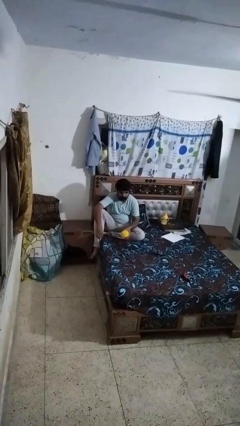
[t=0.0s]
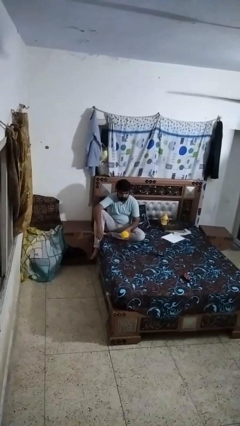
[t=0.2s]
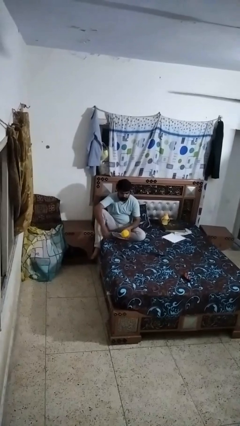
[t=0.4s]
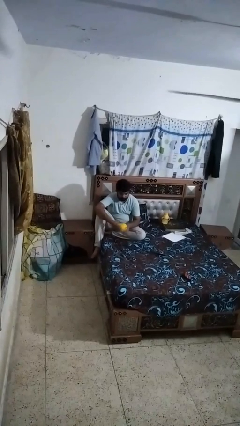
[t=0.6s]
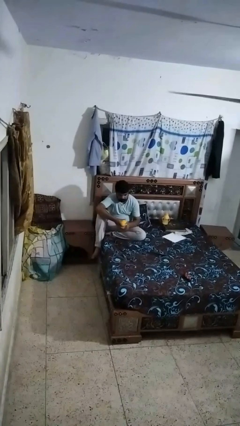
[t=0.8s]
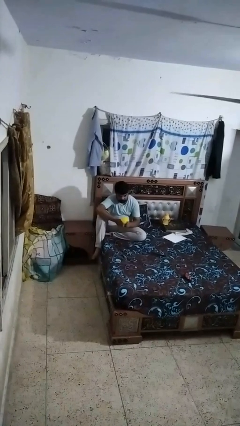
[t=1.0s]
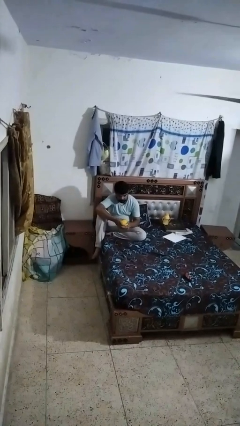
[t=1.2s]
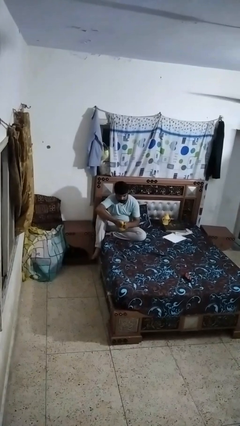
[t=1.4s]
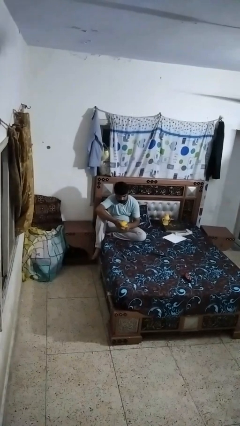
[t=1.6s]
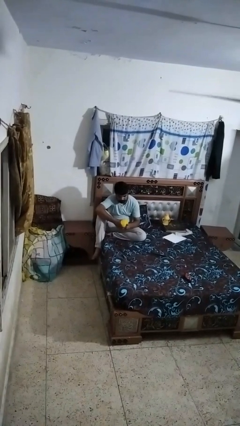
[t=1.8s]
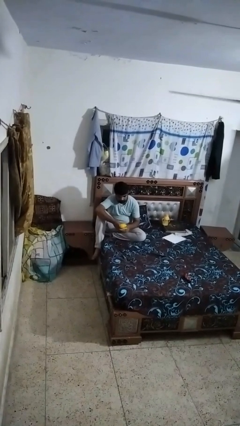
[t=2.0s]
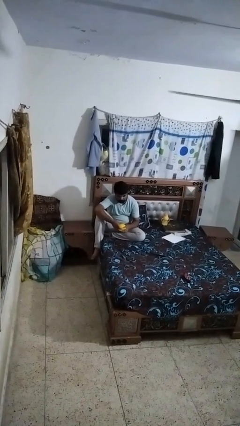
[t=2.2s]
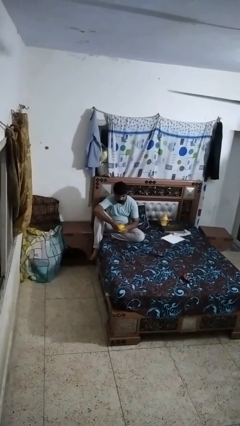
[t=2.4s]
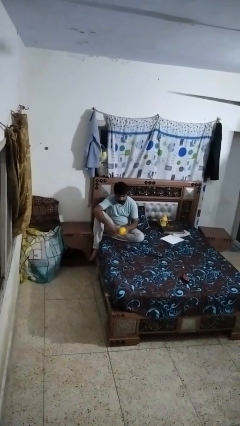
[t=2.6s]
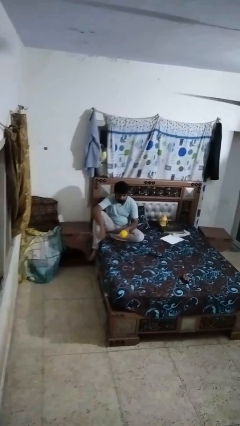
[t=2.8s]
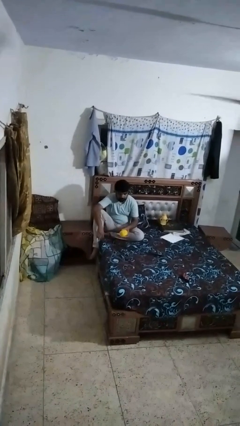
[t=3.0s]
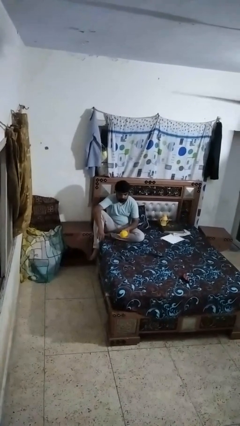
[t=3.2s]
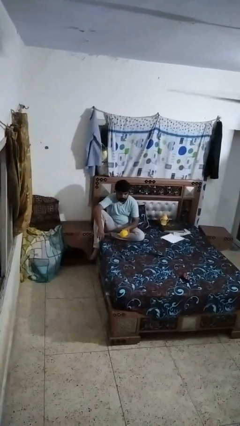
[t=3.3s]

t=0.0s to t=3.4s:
person squeezes object

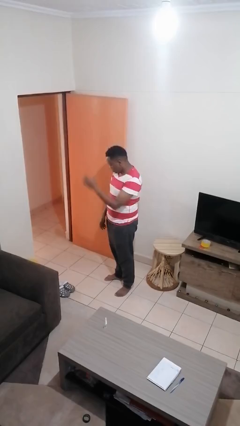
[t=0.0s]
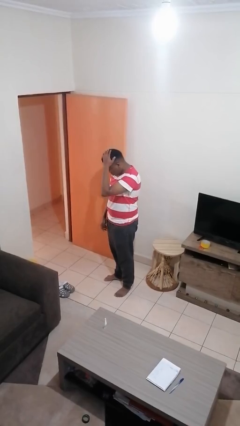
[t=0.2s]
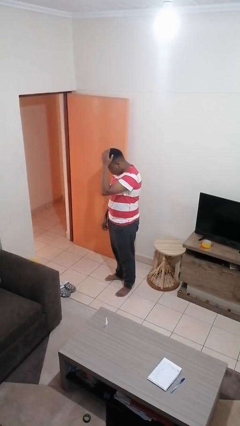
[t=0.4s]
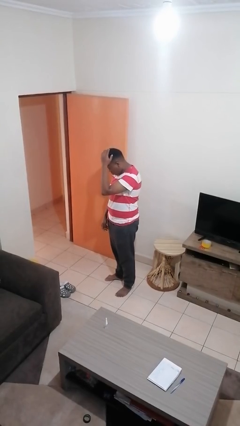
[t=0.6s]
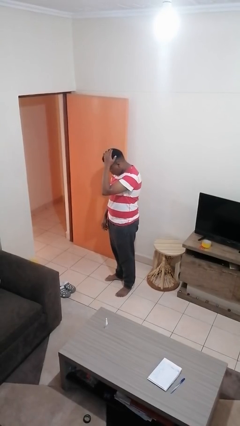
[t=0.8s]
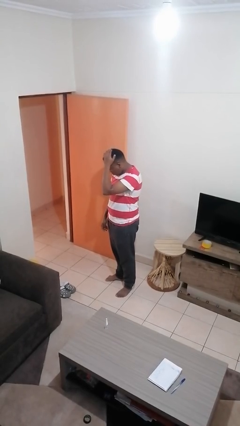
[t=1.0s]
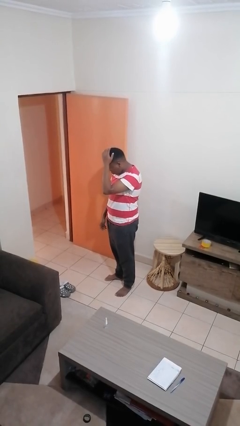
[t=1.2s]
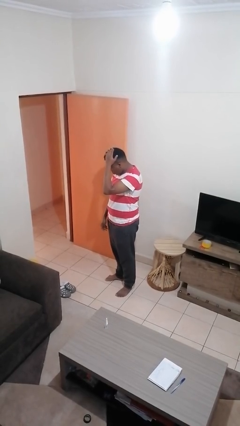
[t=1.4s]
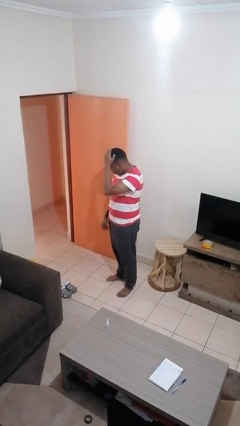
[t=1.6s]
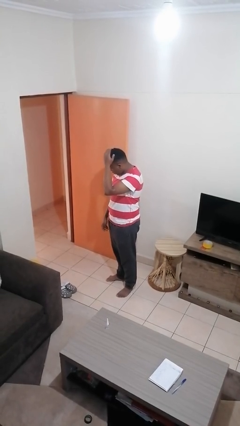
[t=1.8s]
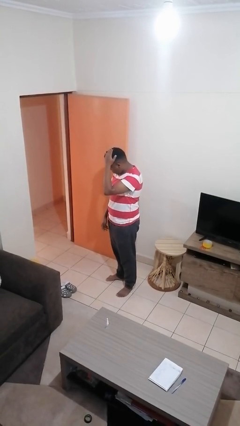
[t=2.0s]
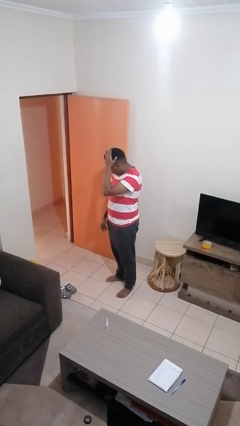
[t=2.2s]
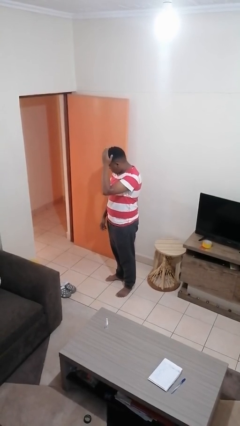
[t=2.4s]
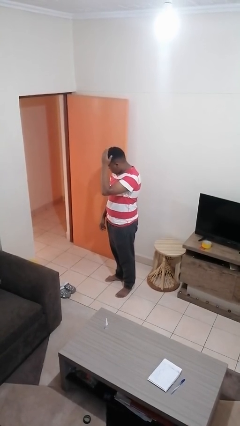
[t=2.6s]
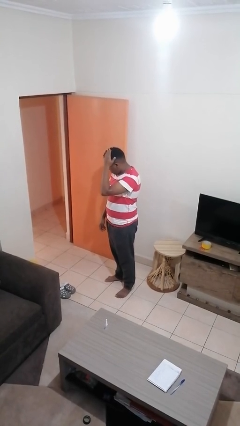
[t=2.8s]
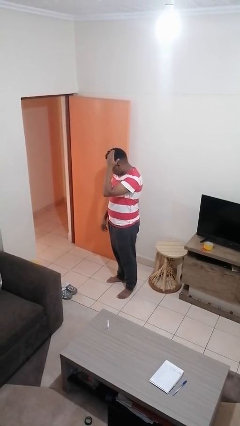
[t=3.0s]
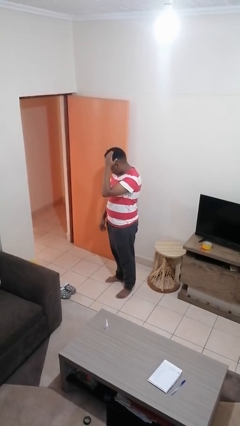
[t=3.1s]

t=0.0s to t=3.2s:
person pats head

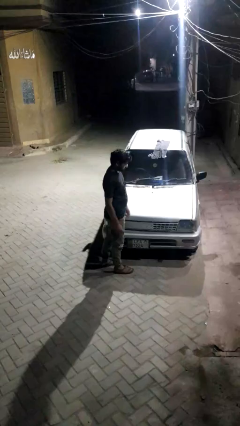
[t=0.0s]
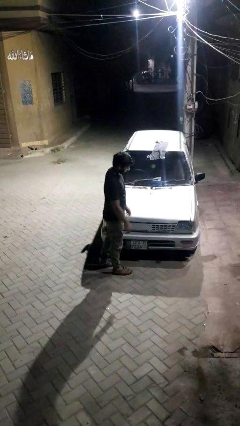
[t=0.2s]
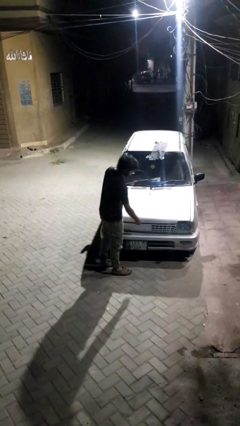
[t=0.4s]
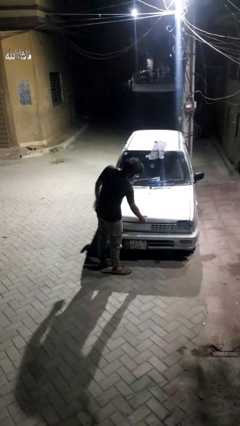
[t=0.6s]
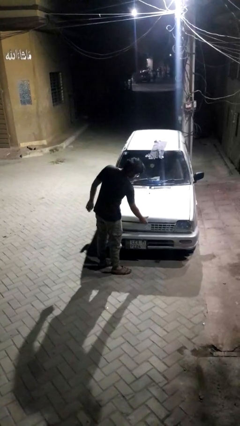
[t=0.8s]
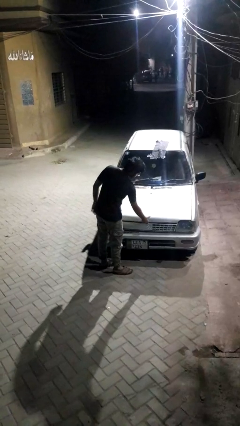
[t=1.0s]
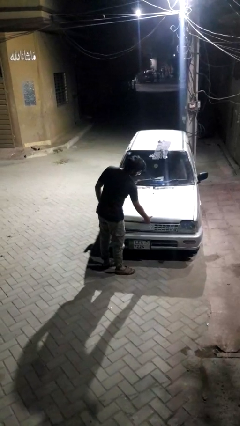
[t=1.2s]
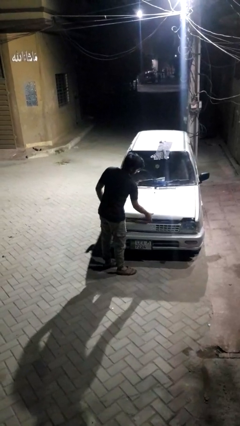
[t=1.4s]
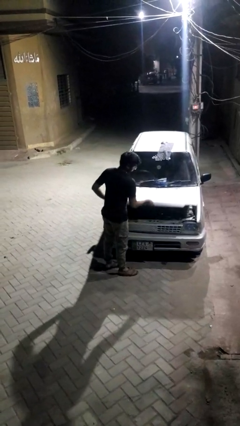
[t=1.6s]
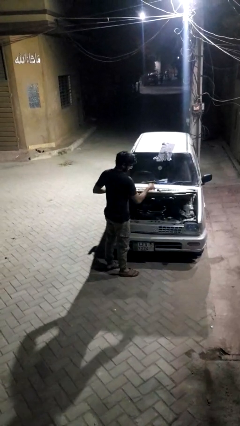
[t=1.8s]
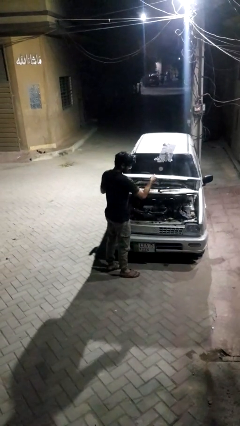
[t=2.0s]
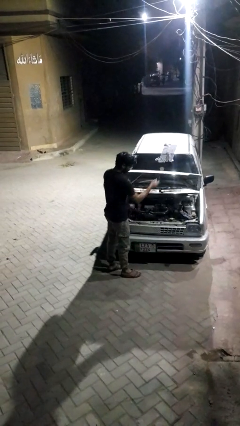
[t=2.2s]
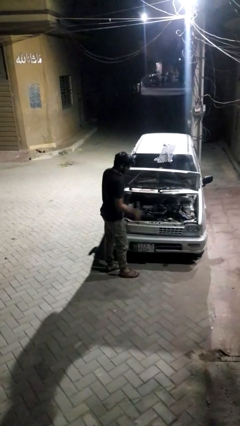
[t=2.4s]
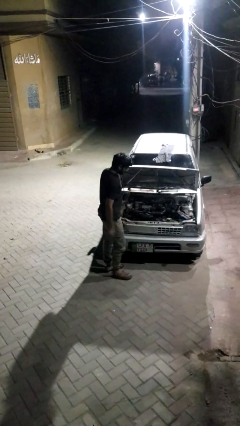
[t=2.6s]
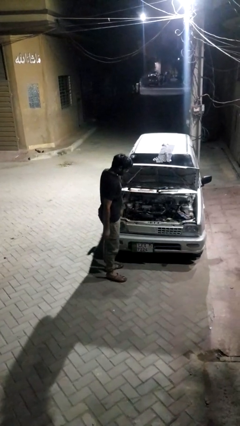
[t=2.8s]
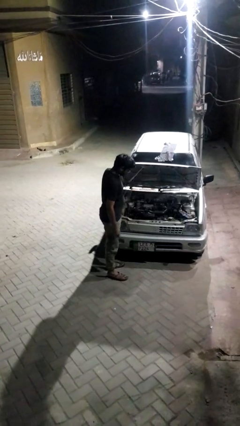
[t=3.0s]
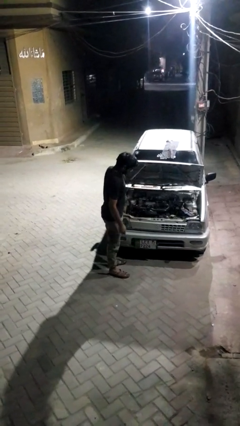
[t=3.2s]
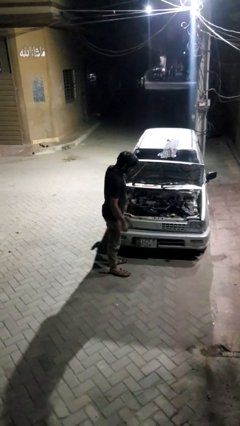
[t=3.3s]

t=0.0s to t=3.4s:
person opens car hood

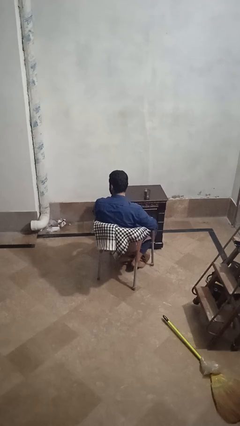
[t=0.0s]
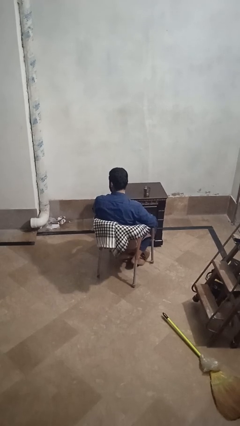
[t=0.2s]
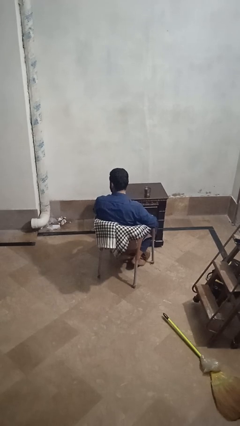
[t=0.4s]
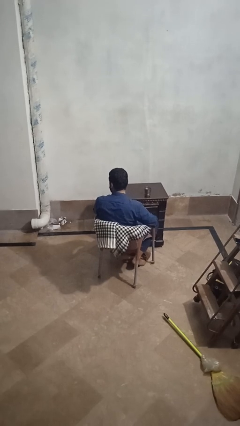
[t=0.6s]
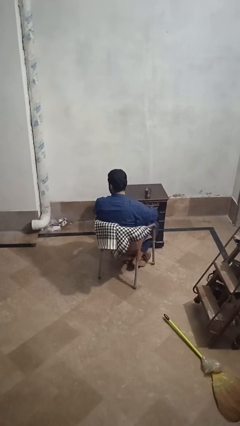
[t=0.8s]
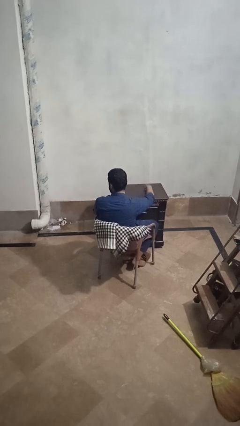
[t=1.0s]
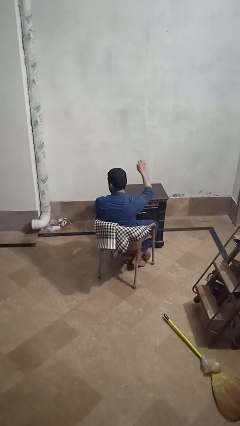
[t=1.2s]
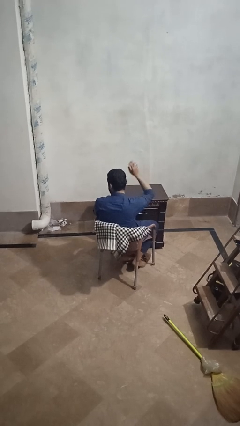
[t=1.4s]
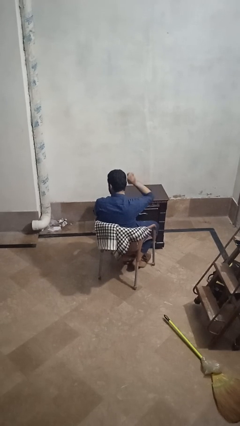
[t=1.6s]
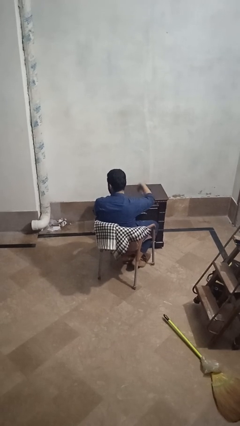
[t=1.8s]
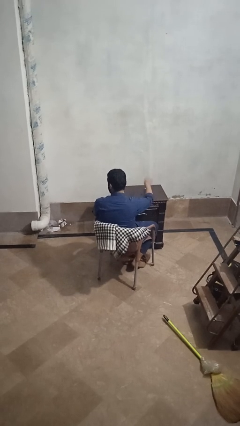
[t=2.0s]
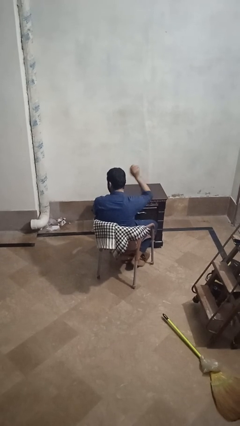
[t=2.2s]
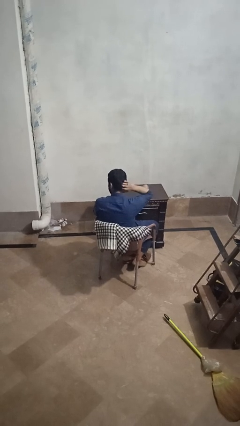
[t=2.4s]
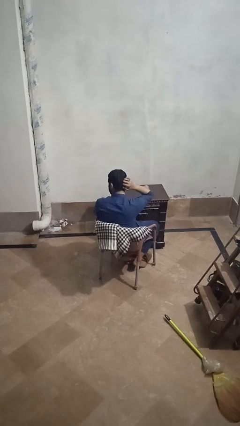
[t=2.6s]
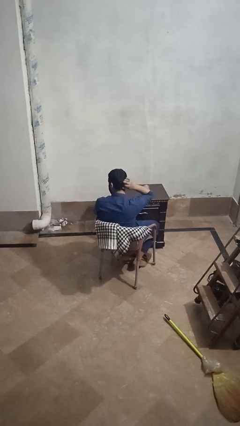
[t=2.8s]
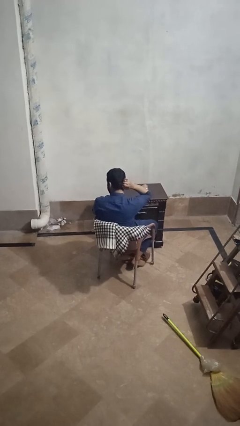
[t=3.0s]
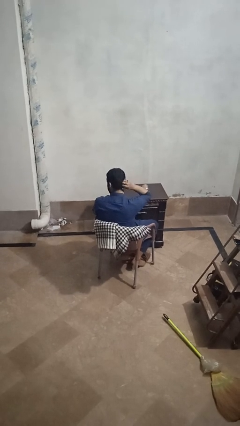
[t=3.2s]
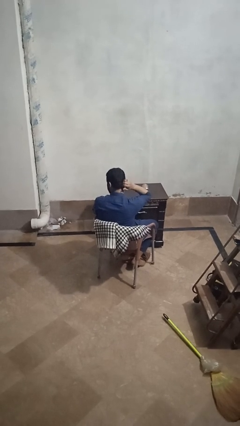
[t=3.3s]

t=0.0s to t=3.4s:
person knocks over glass

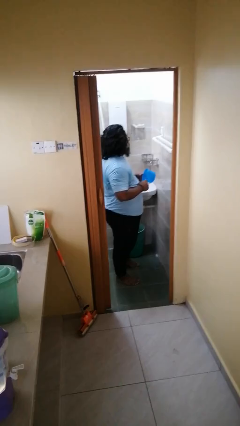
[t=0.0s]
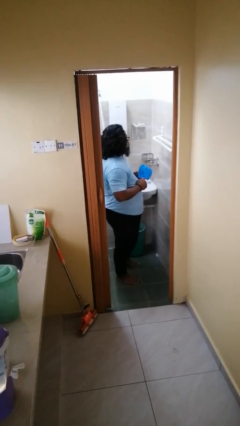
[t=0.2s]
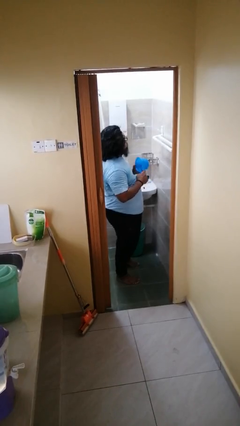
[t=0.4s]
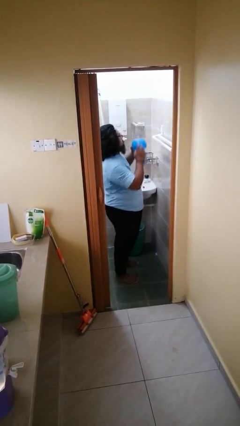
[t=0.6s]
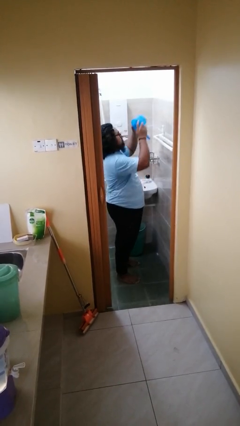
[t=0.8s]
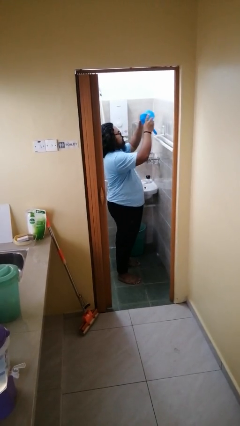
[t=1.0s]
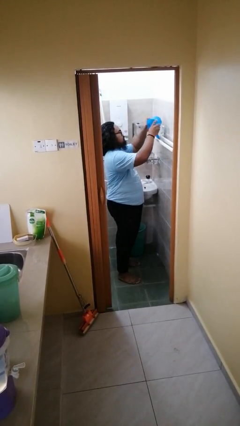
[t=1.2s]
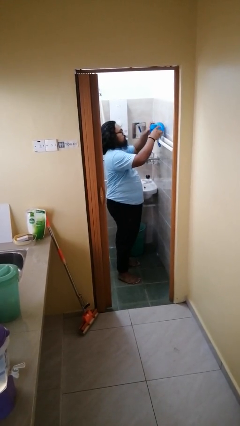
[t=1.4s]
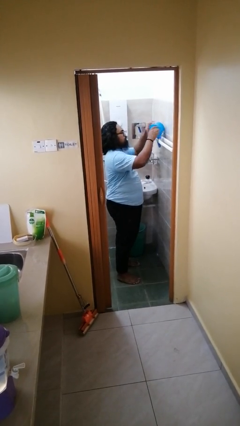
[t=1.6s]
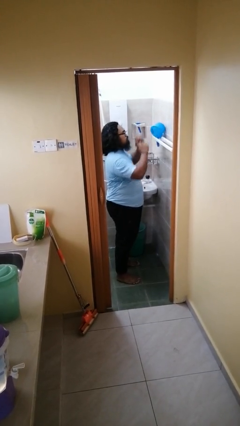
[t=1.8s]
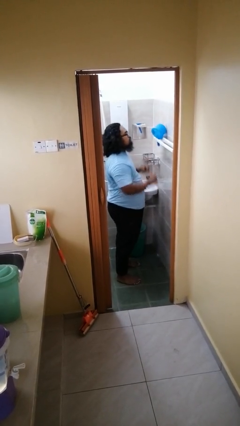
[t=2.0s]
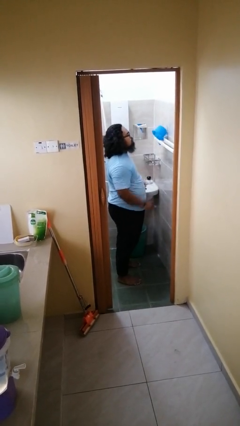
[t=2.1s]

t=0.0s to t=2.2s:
person puts down object on countertop

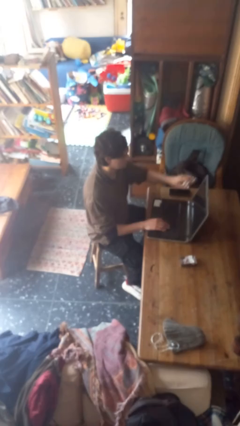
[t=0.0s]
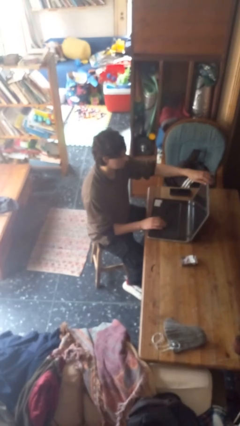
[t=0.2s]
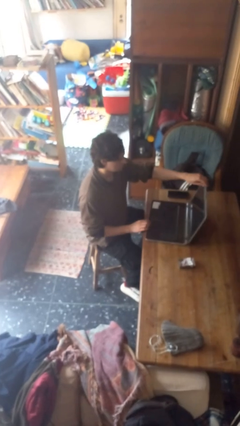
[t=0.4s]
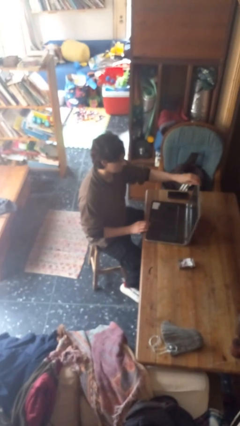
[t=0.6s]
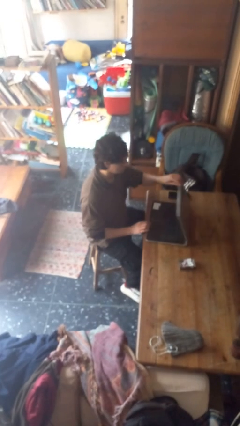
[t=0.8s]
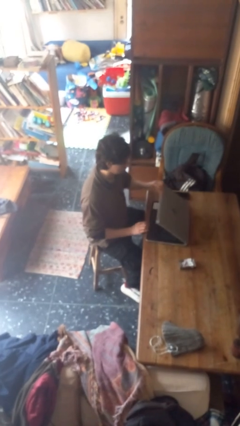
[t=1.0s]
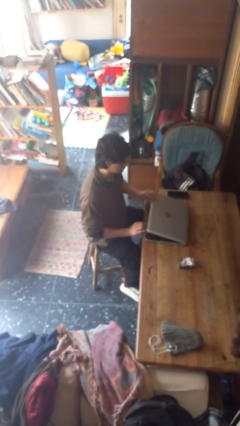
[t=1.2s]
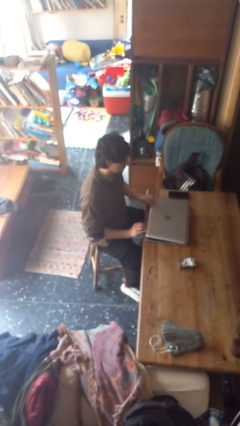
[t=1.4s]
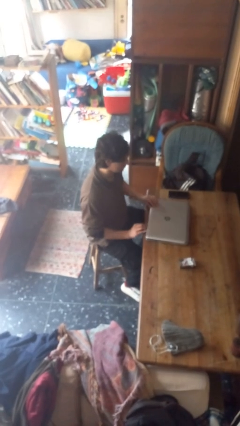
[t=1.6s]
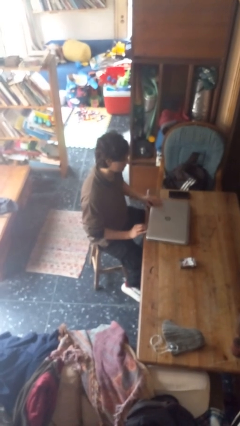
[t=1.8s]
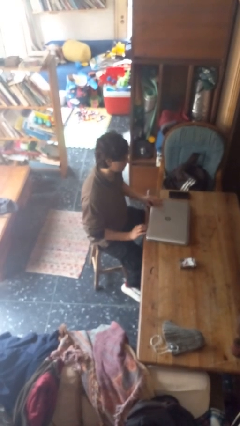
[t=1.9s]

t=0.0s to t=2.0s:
person closes laptop
